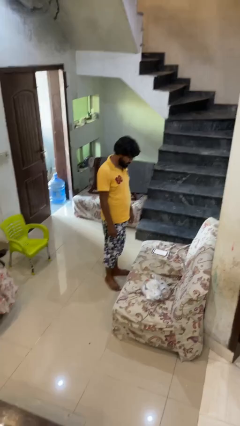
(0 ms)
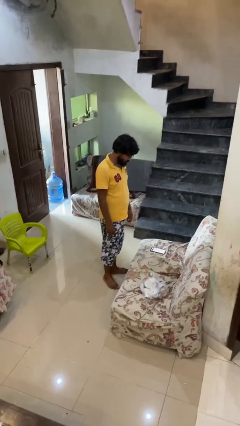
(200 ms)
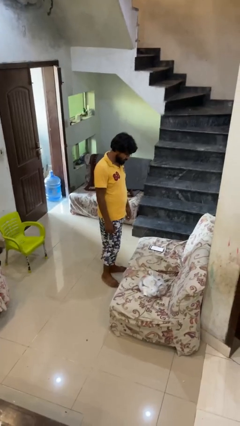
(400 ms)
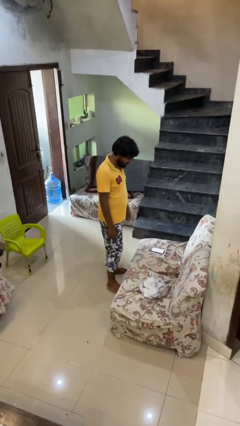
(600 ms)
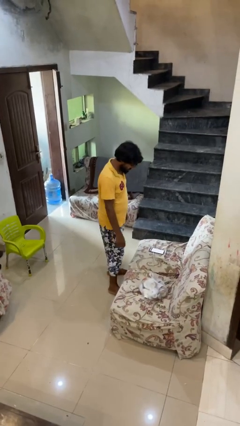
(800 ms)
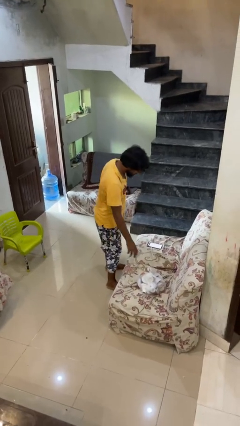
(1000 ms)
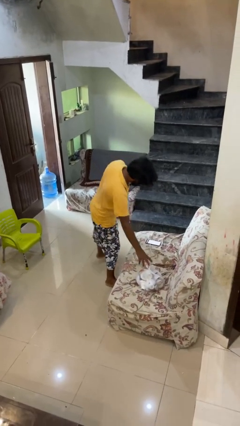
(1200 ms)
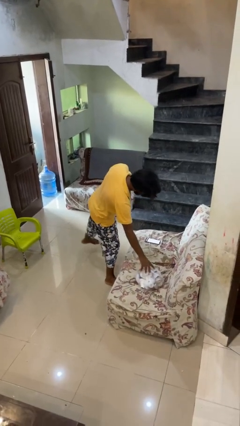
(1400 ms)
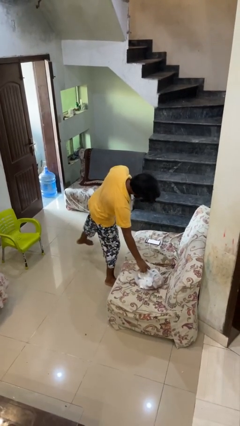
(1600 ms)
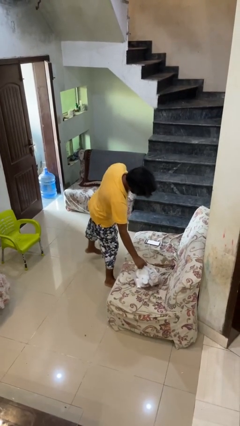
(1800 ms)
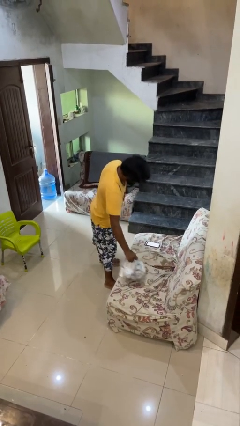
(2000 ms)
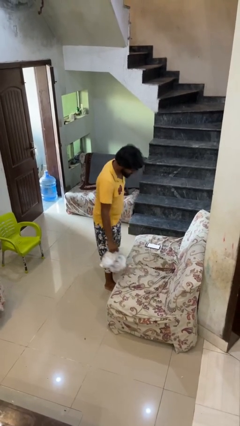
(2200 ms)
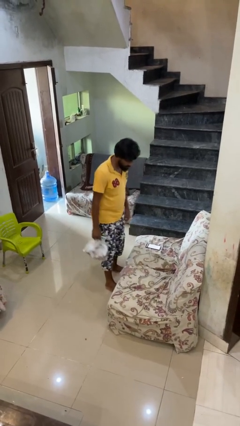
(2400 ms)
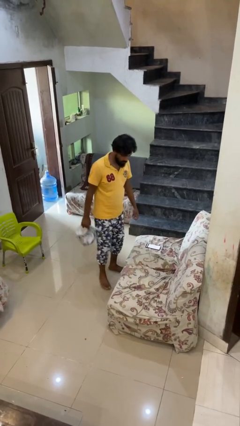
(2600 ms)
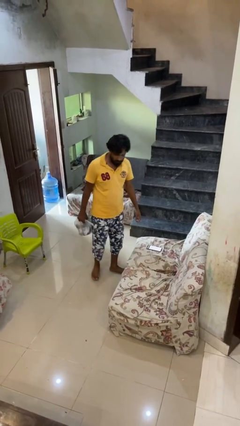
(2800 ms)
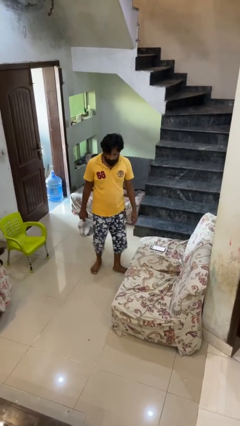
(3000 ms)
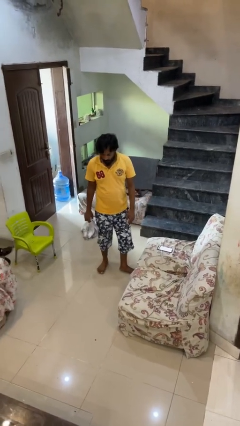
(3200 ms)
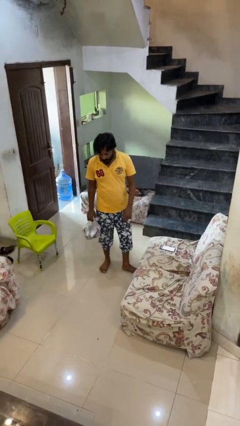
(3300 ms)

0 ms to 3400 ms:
person picks up object from couch

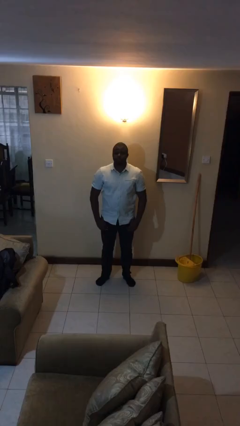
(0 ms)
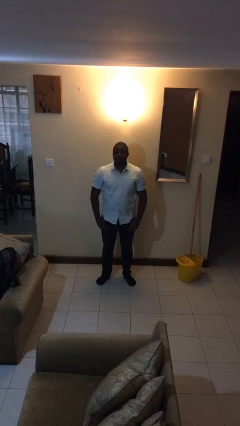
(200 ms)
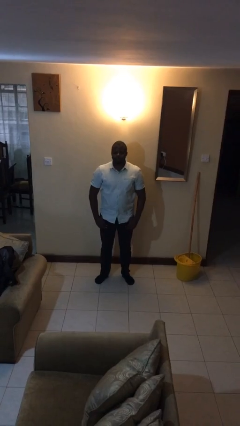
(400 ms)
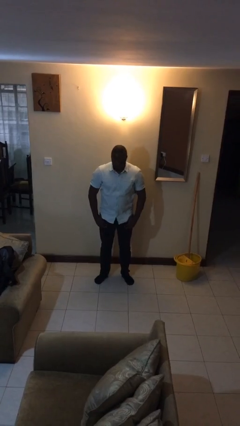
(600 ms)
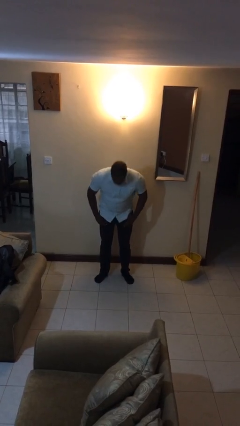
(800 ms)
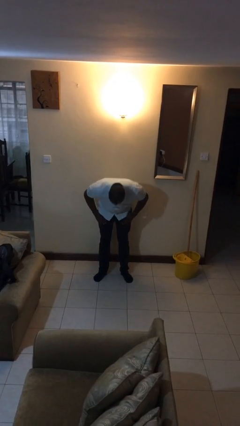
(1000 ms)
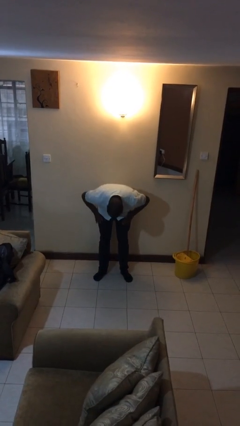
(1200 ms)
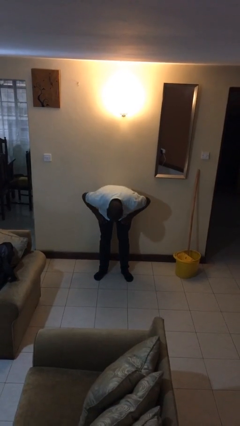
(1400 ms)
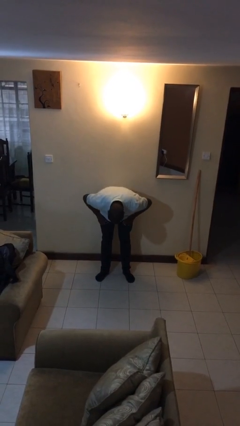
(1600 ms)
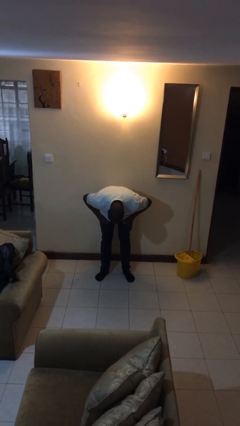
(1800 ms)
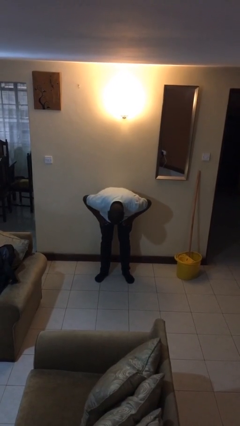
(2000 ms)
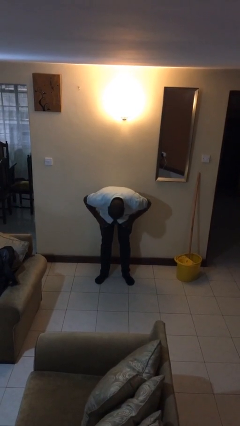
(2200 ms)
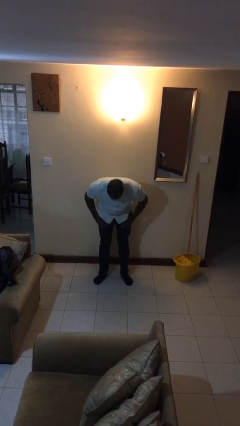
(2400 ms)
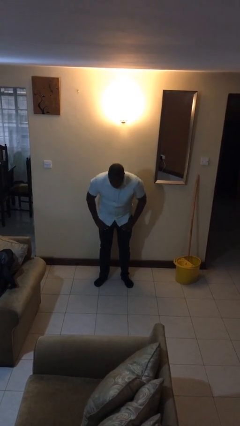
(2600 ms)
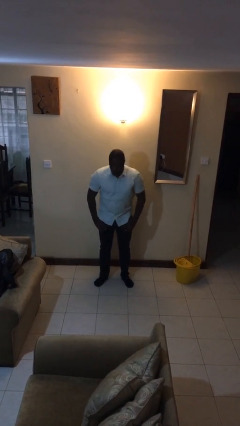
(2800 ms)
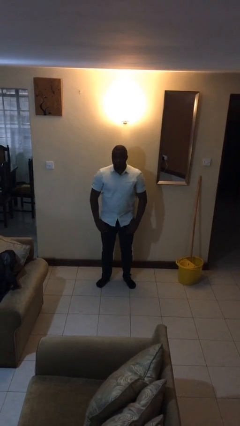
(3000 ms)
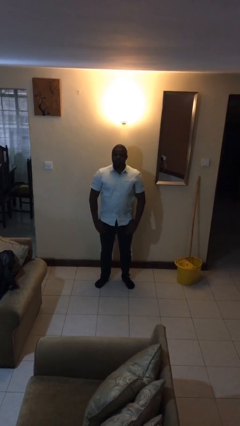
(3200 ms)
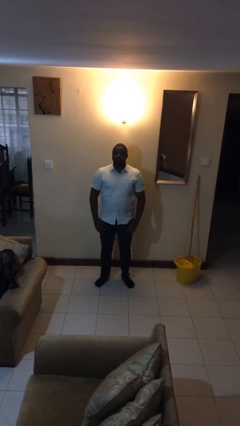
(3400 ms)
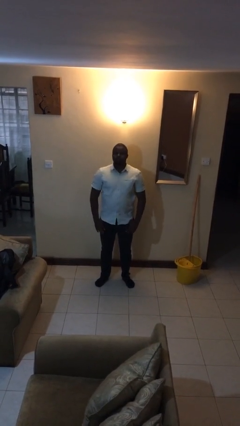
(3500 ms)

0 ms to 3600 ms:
person bows

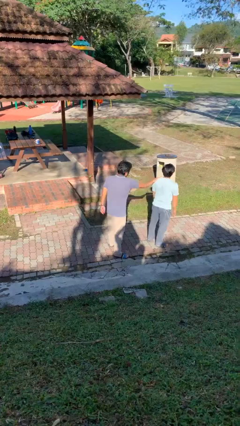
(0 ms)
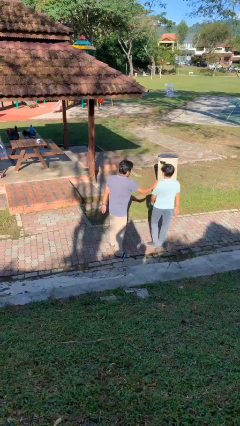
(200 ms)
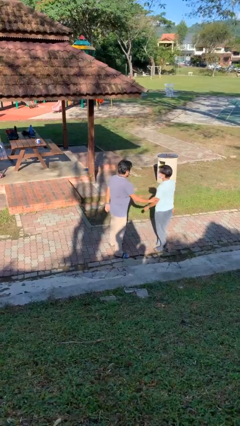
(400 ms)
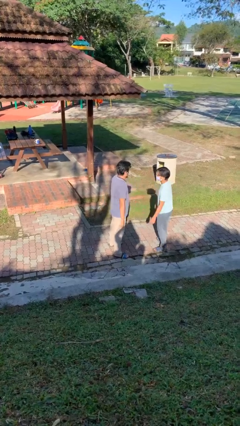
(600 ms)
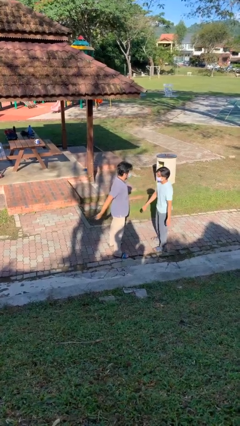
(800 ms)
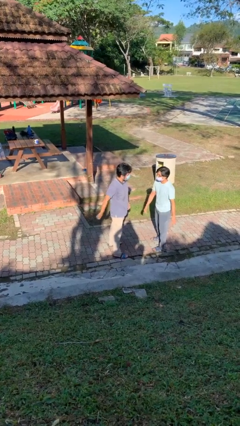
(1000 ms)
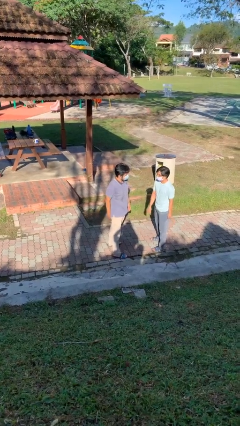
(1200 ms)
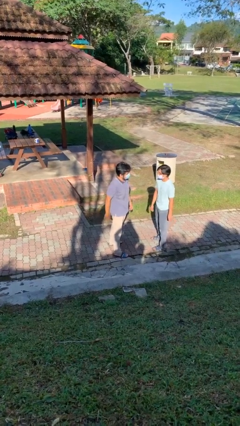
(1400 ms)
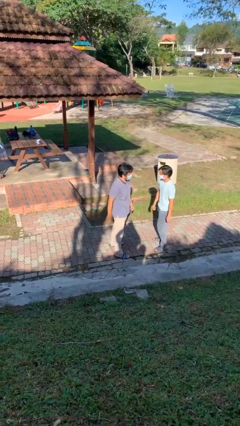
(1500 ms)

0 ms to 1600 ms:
person spins person around

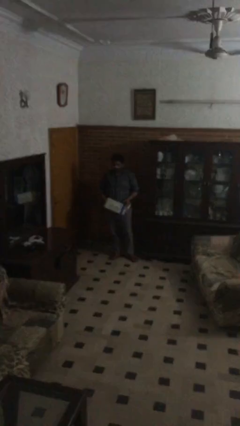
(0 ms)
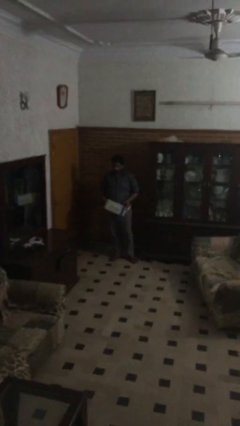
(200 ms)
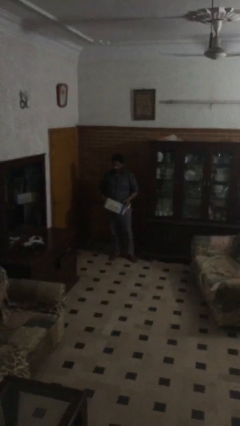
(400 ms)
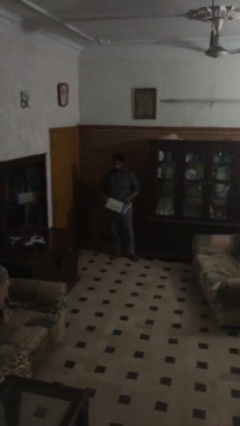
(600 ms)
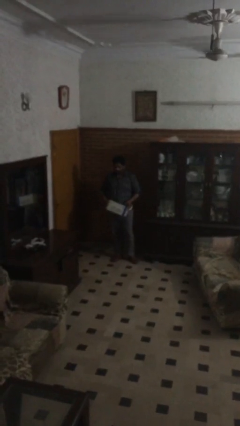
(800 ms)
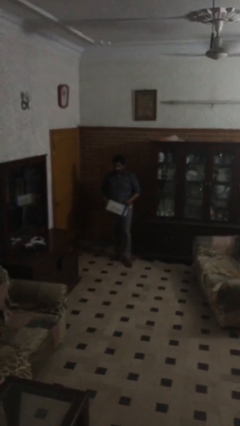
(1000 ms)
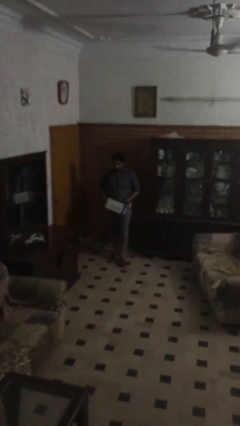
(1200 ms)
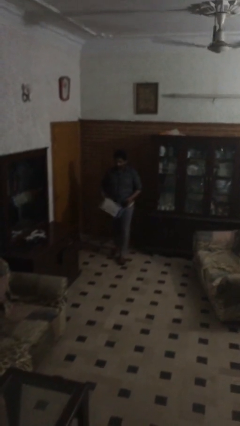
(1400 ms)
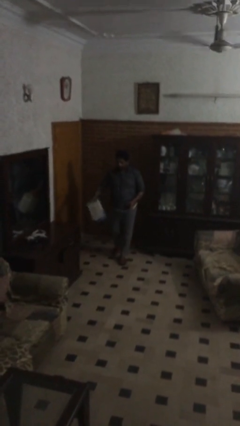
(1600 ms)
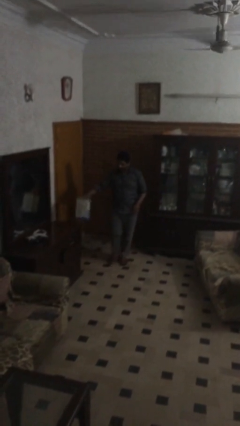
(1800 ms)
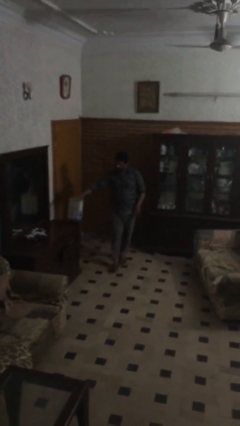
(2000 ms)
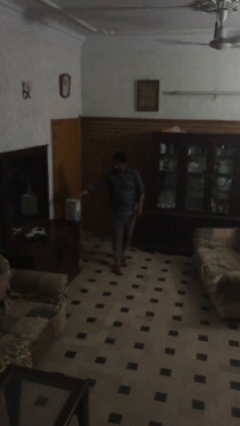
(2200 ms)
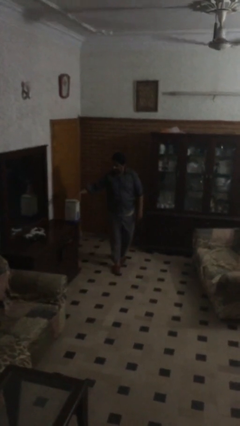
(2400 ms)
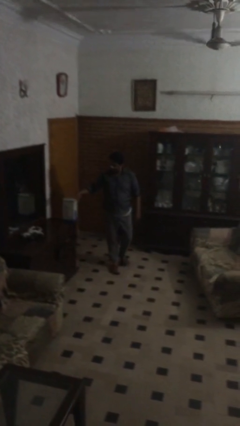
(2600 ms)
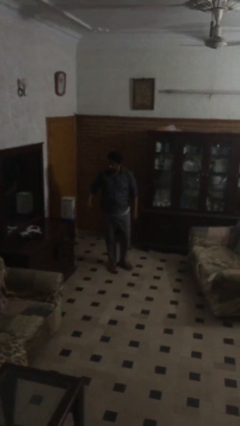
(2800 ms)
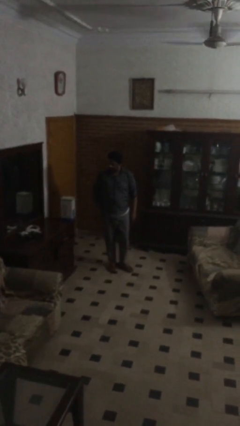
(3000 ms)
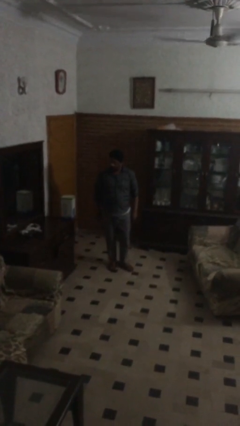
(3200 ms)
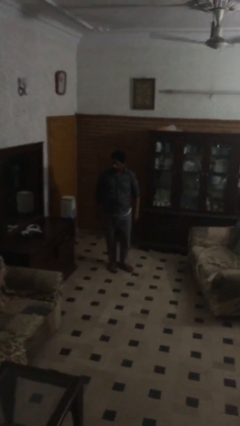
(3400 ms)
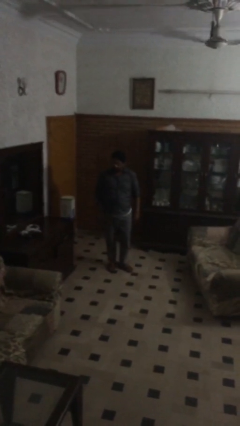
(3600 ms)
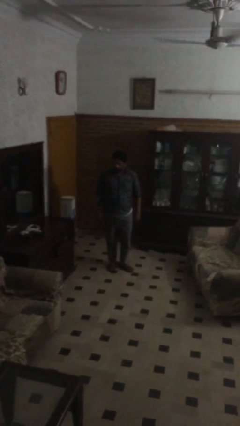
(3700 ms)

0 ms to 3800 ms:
person puts down object on floor

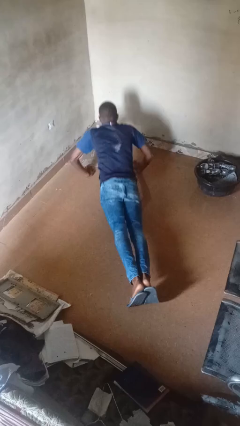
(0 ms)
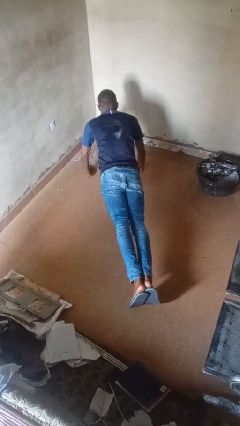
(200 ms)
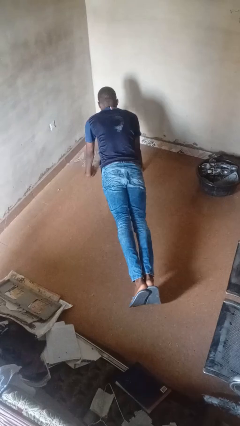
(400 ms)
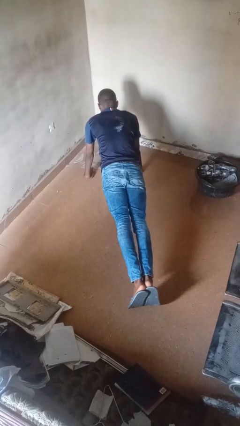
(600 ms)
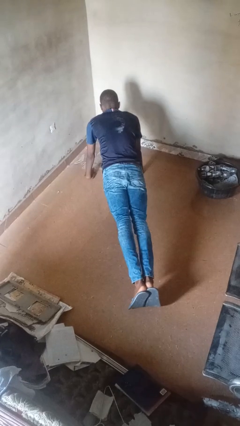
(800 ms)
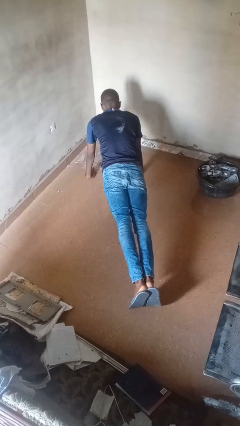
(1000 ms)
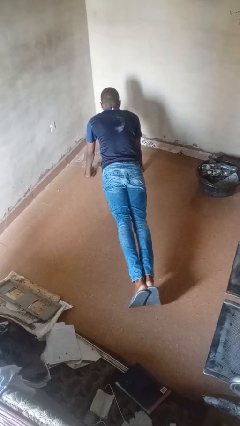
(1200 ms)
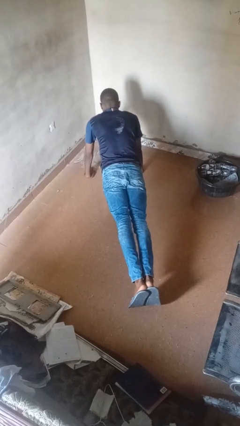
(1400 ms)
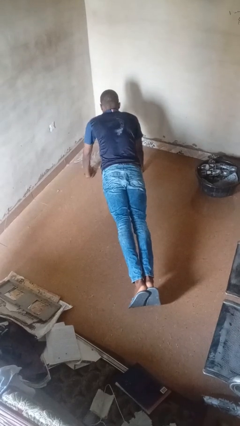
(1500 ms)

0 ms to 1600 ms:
person exercises with pushup

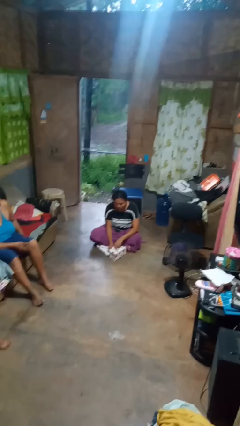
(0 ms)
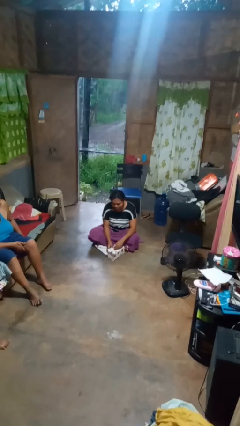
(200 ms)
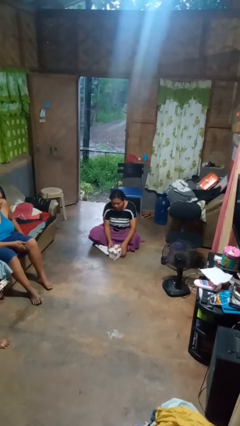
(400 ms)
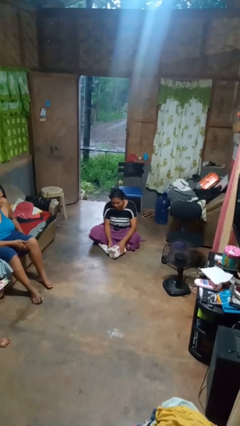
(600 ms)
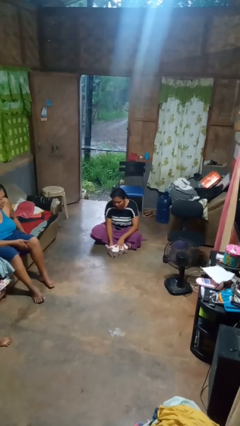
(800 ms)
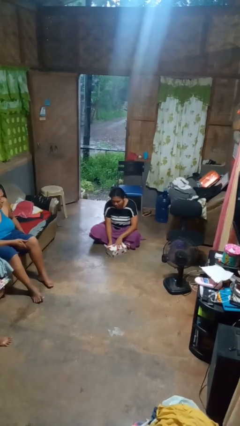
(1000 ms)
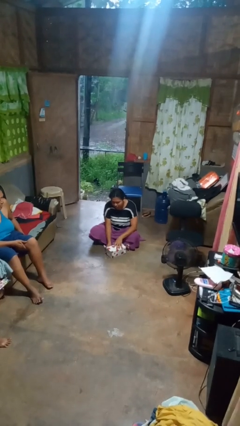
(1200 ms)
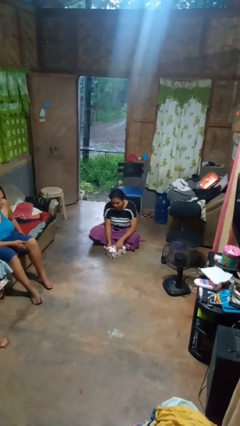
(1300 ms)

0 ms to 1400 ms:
person wraps box

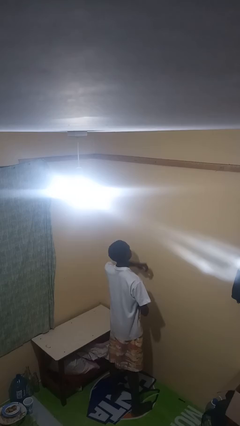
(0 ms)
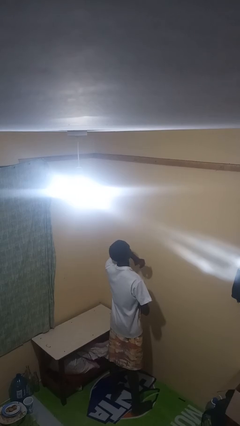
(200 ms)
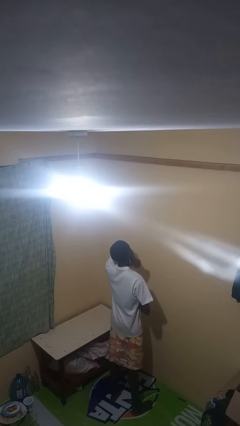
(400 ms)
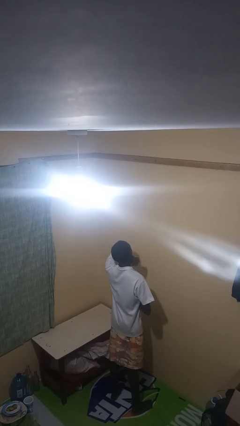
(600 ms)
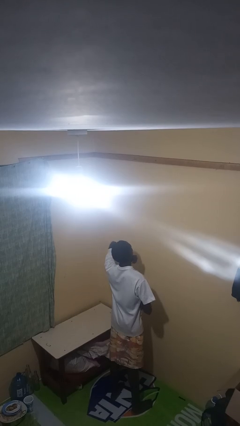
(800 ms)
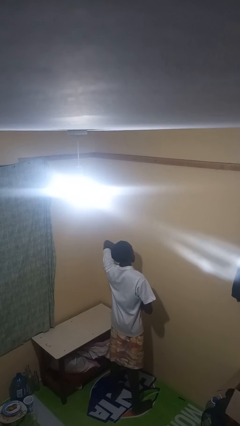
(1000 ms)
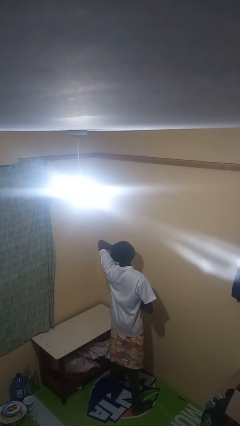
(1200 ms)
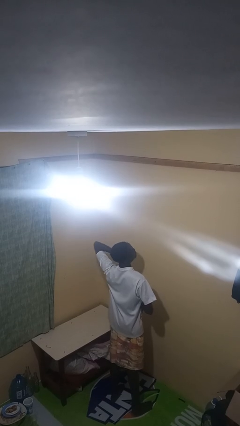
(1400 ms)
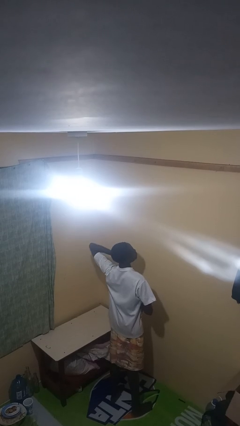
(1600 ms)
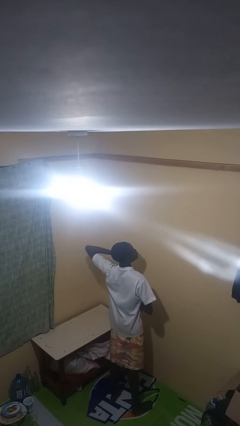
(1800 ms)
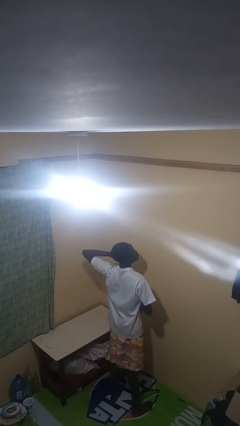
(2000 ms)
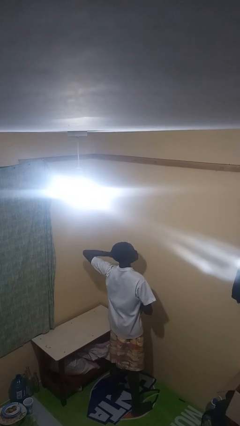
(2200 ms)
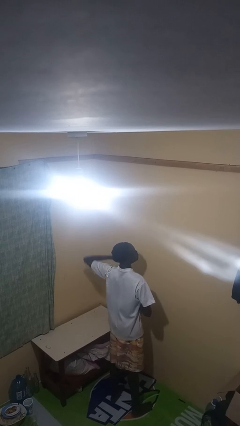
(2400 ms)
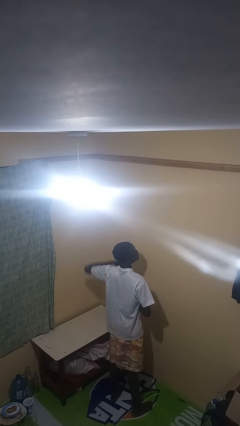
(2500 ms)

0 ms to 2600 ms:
person gestures cut
